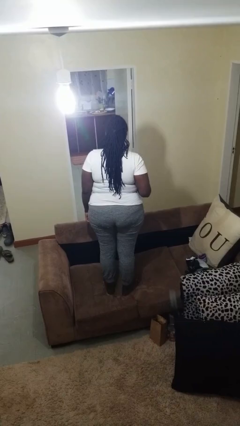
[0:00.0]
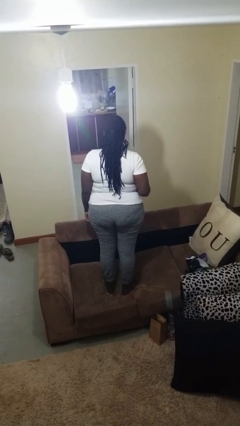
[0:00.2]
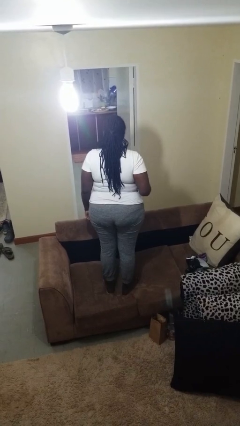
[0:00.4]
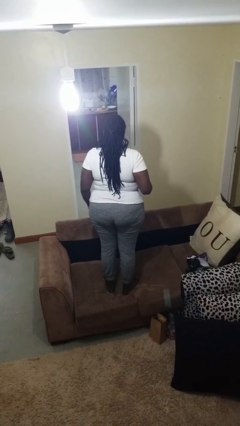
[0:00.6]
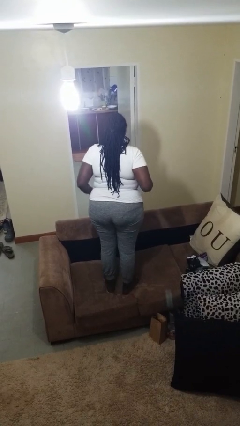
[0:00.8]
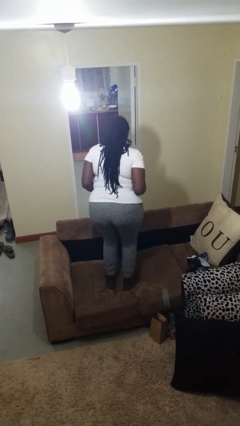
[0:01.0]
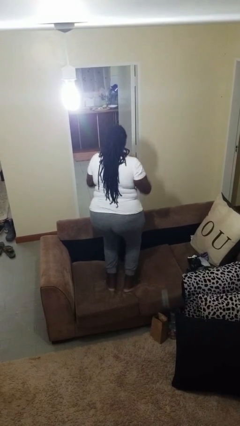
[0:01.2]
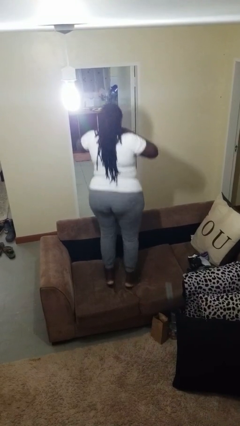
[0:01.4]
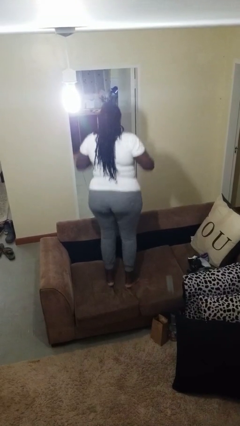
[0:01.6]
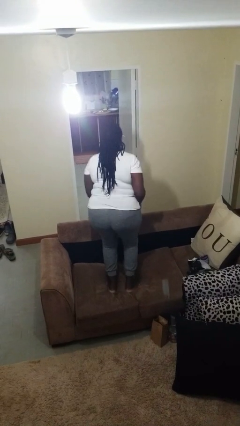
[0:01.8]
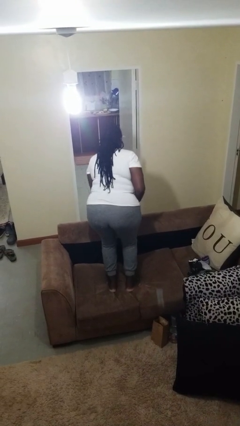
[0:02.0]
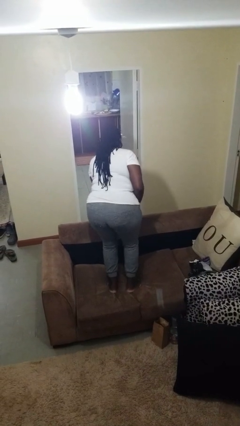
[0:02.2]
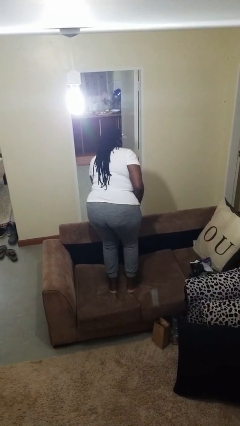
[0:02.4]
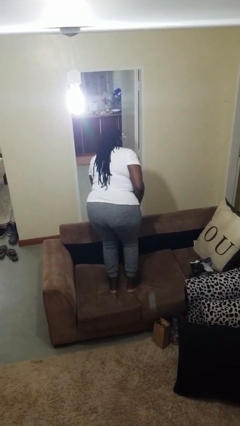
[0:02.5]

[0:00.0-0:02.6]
person jumps on couch

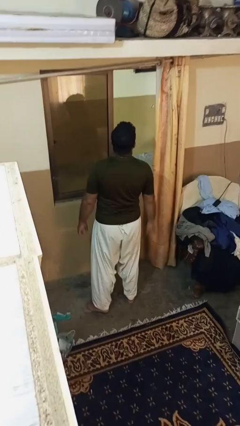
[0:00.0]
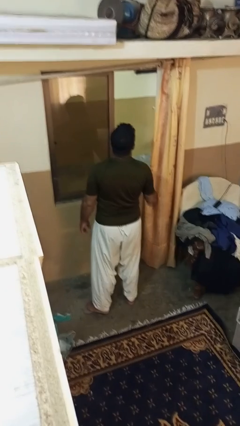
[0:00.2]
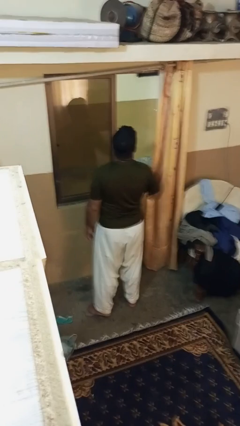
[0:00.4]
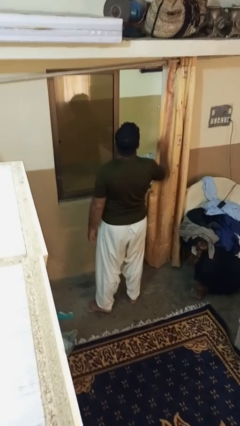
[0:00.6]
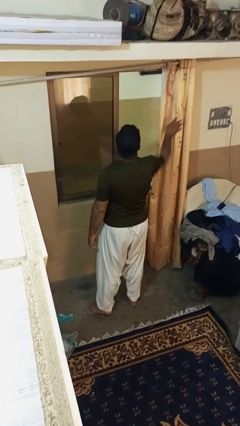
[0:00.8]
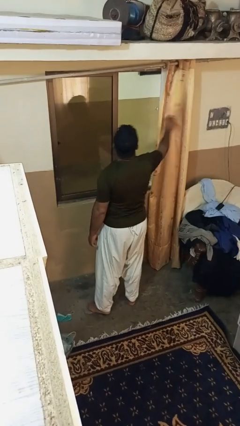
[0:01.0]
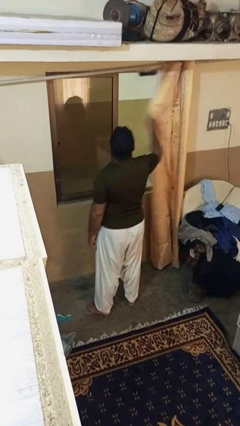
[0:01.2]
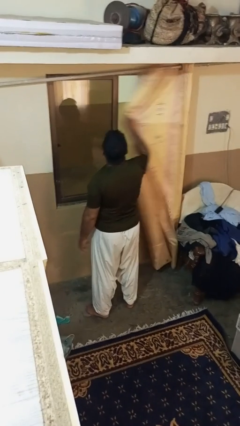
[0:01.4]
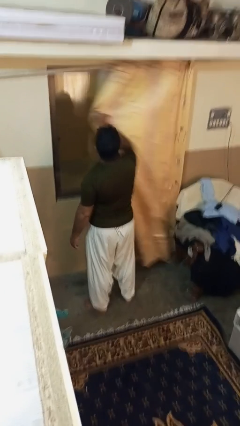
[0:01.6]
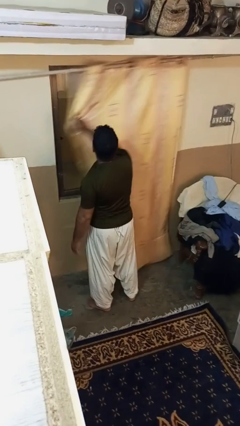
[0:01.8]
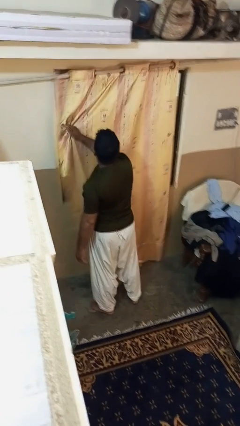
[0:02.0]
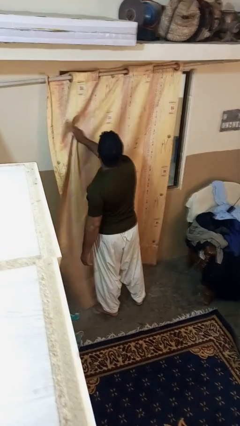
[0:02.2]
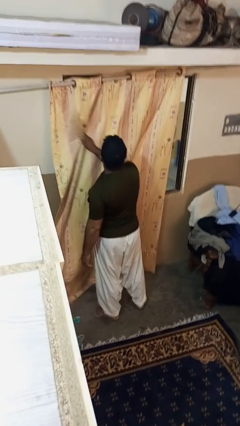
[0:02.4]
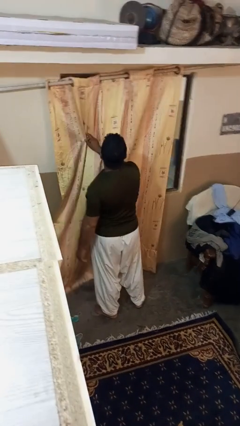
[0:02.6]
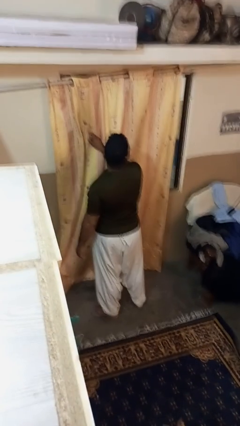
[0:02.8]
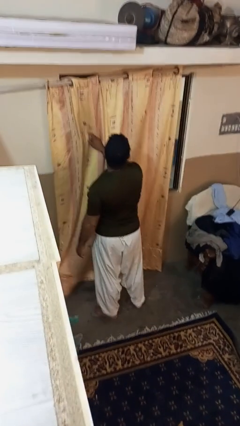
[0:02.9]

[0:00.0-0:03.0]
person closes curtains

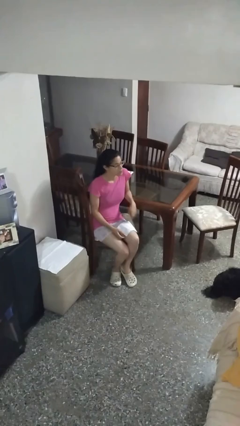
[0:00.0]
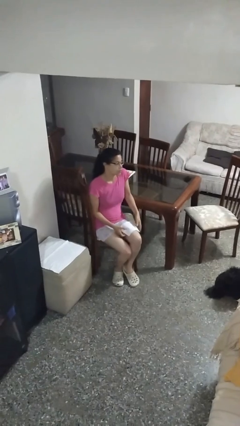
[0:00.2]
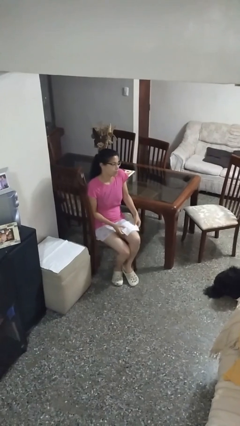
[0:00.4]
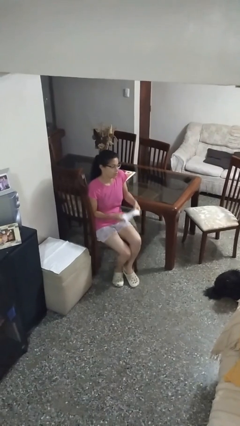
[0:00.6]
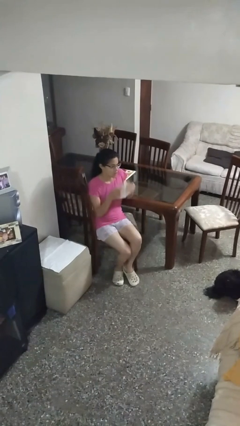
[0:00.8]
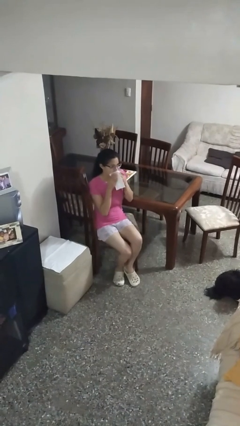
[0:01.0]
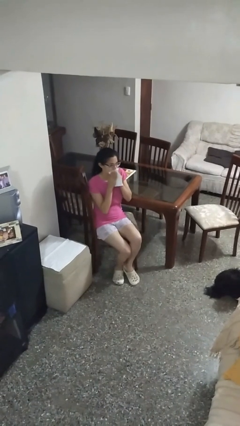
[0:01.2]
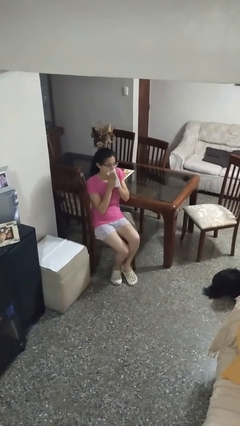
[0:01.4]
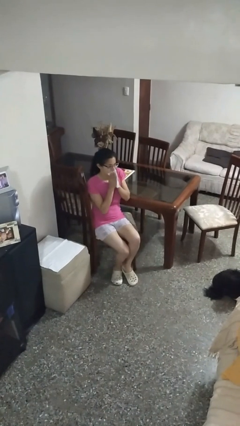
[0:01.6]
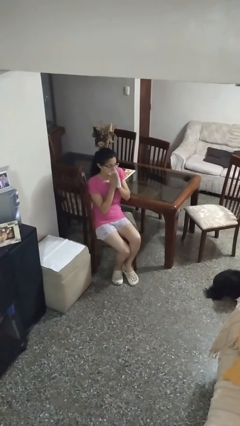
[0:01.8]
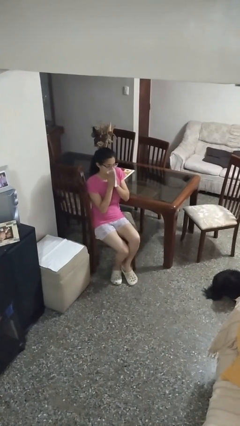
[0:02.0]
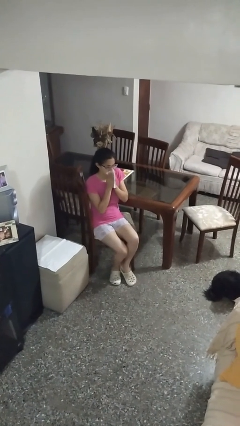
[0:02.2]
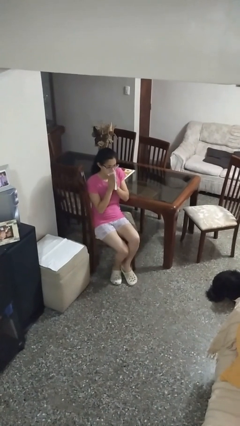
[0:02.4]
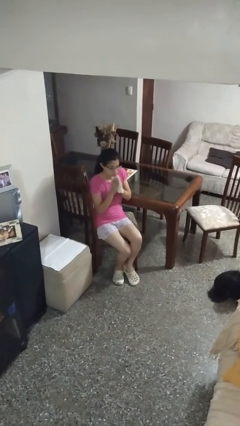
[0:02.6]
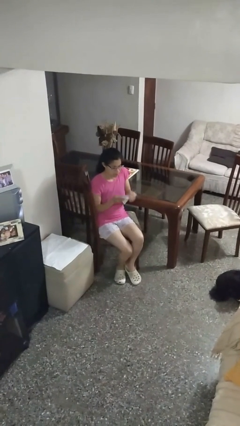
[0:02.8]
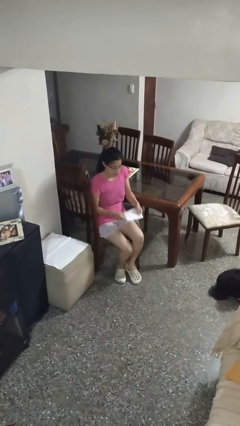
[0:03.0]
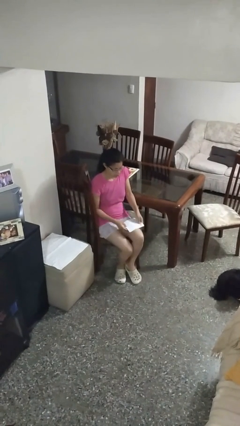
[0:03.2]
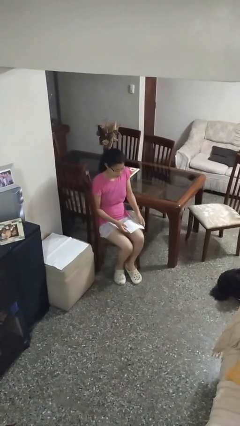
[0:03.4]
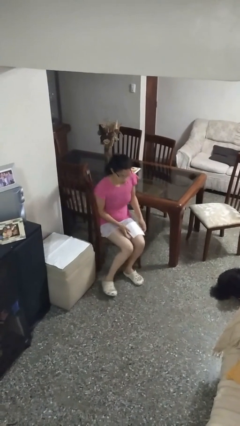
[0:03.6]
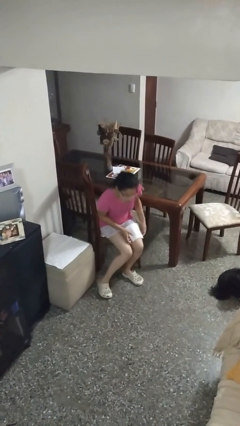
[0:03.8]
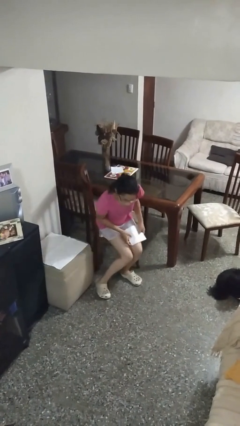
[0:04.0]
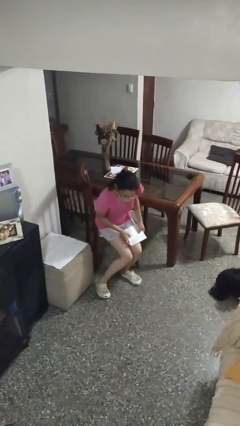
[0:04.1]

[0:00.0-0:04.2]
person wipes mouth with napkin

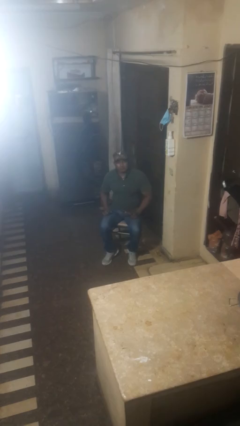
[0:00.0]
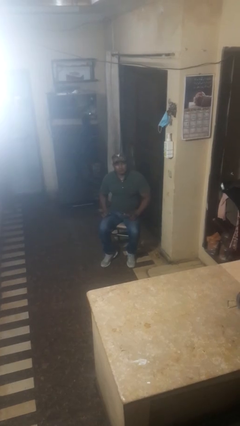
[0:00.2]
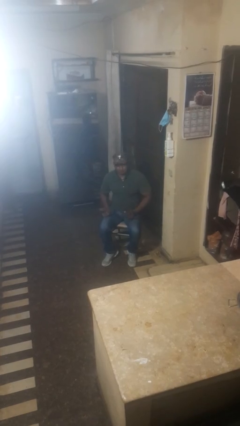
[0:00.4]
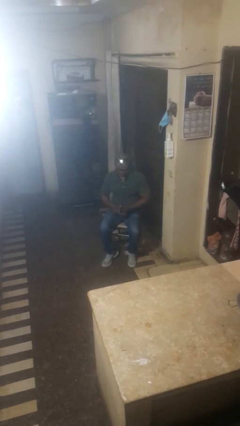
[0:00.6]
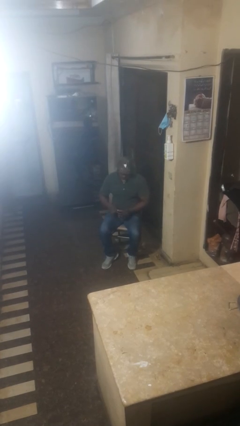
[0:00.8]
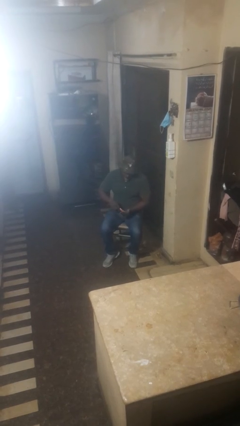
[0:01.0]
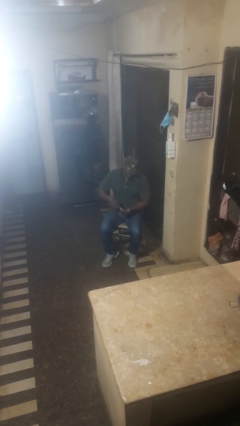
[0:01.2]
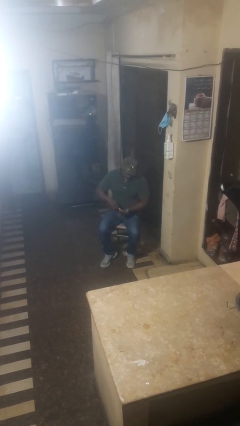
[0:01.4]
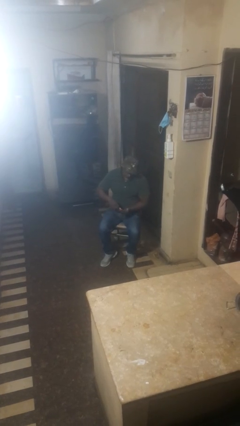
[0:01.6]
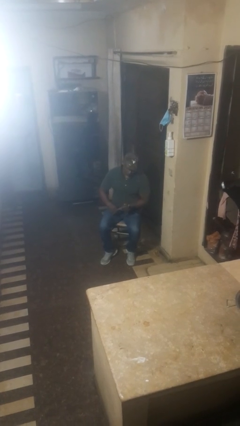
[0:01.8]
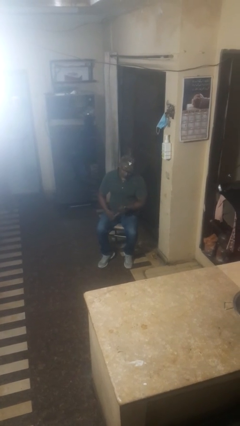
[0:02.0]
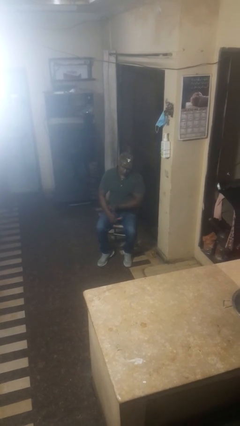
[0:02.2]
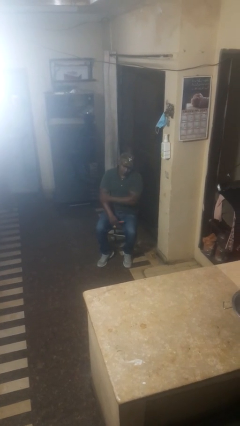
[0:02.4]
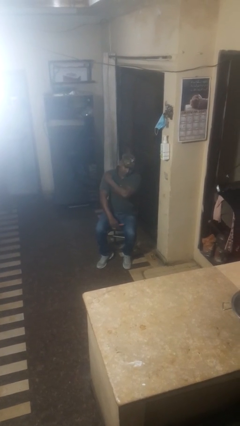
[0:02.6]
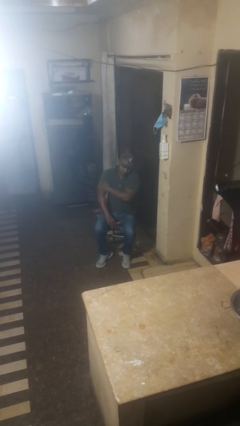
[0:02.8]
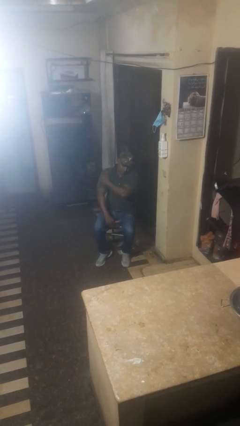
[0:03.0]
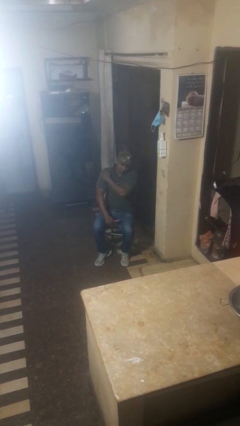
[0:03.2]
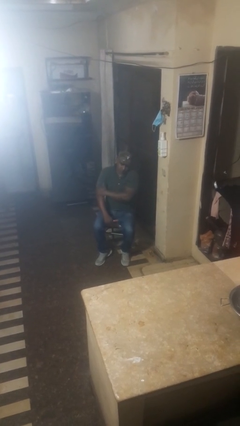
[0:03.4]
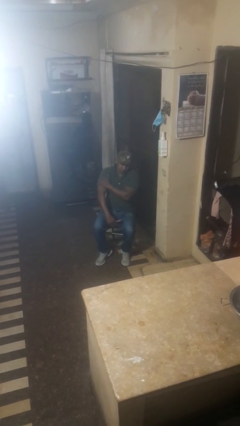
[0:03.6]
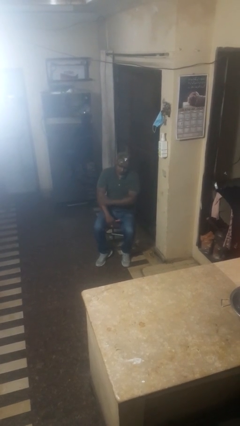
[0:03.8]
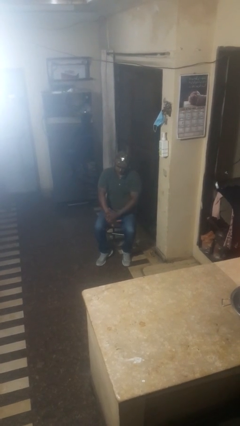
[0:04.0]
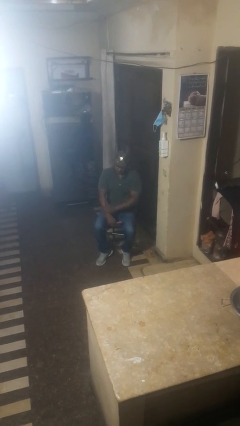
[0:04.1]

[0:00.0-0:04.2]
person applies sunscreen

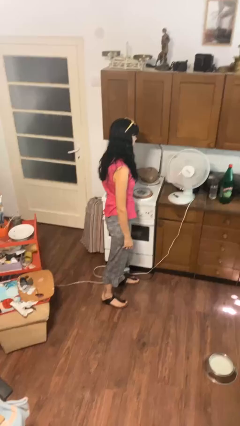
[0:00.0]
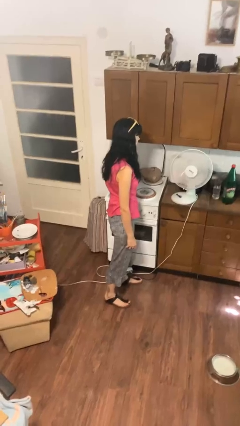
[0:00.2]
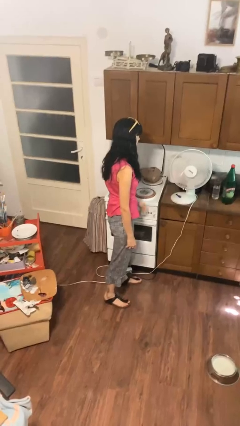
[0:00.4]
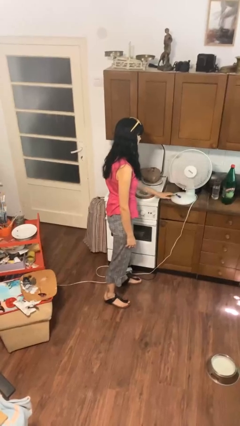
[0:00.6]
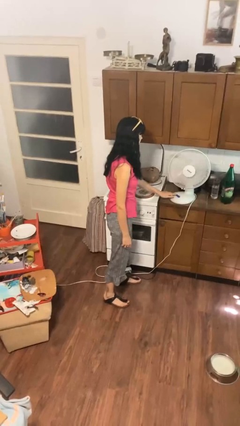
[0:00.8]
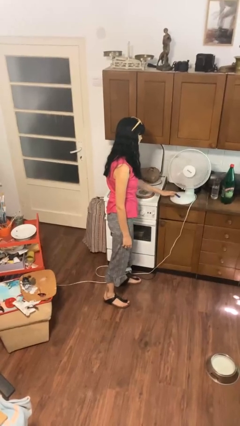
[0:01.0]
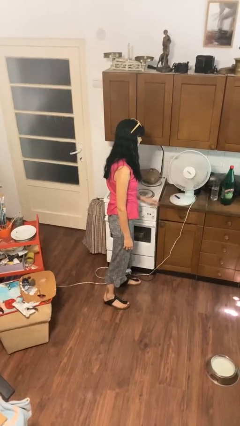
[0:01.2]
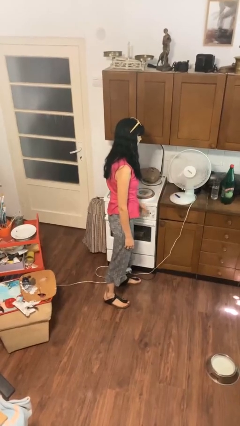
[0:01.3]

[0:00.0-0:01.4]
person turns off fan

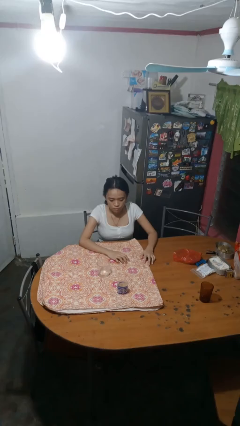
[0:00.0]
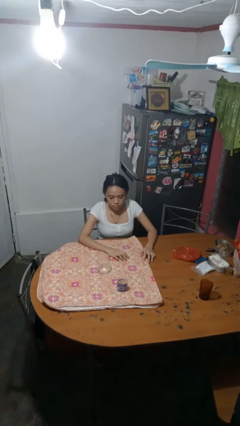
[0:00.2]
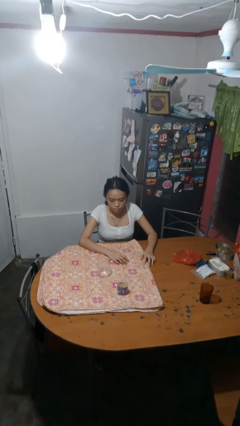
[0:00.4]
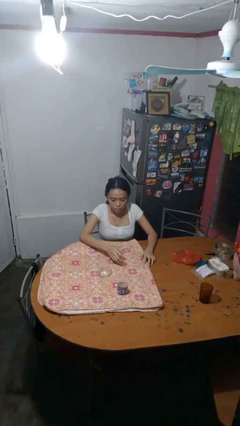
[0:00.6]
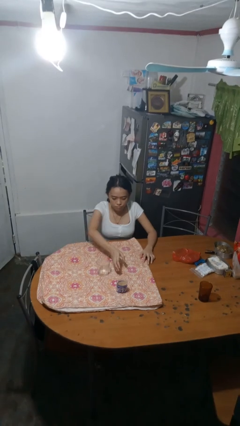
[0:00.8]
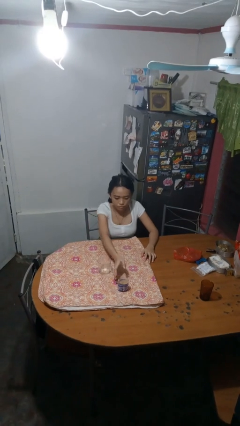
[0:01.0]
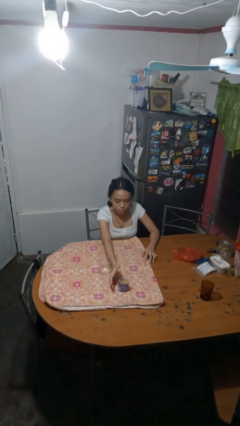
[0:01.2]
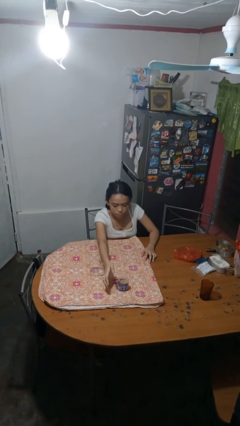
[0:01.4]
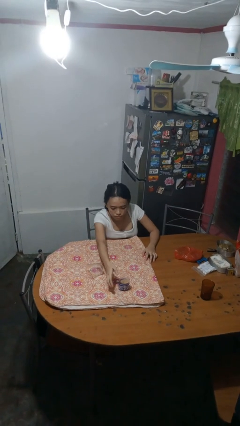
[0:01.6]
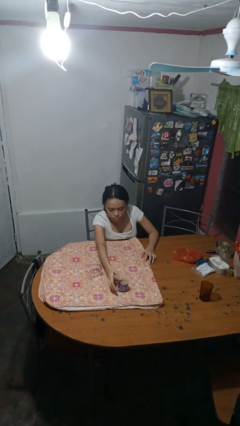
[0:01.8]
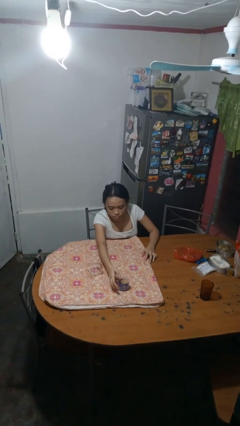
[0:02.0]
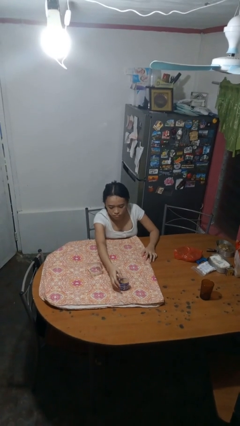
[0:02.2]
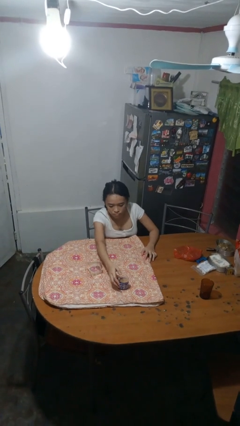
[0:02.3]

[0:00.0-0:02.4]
person knocks over glass
